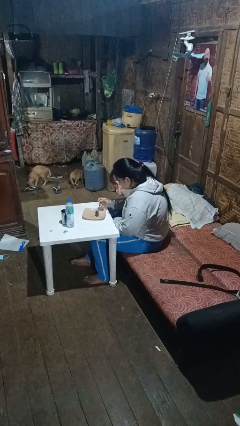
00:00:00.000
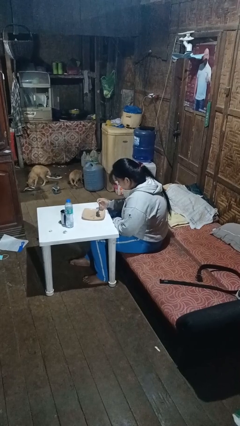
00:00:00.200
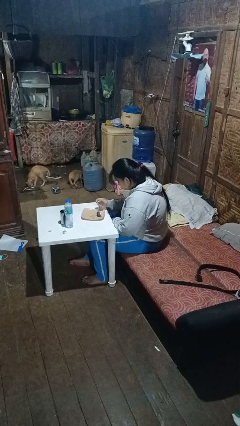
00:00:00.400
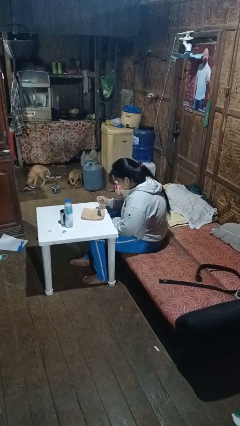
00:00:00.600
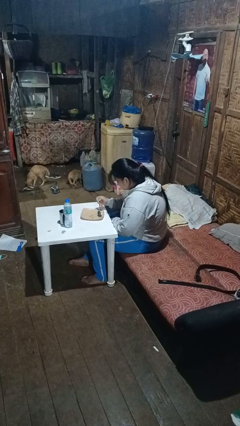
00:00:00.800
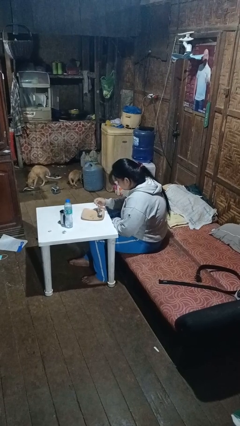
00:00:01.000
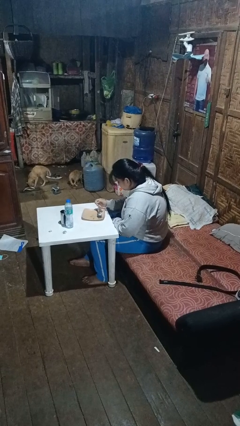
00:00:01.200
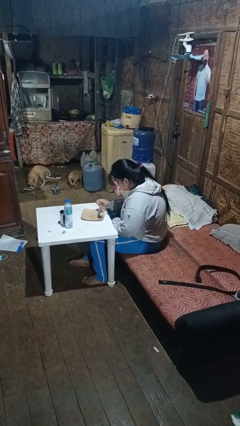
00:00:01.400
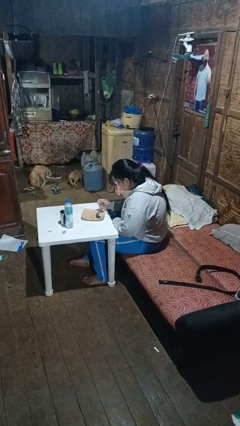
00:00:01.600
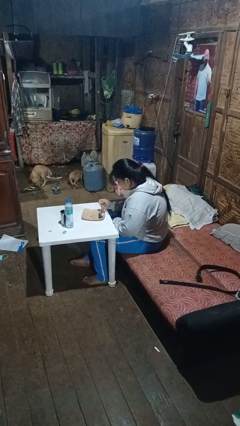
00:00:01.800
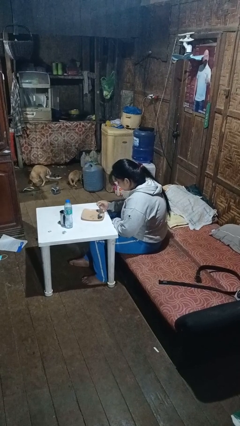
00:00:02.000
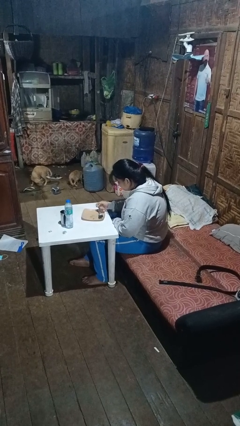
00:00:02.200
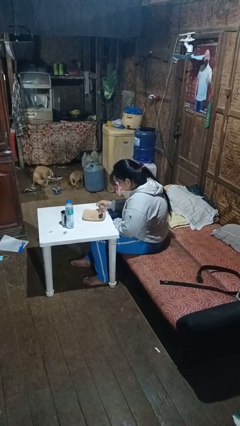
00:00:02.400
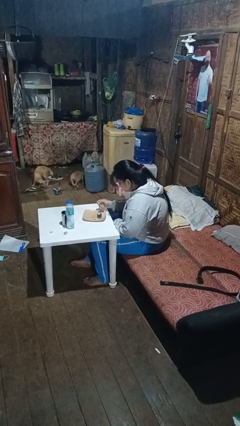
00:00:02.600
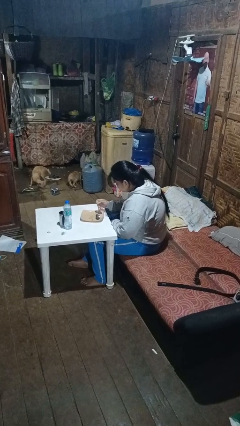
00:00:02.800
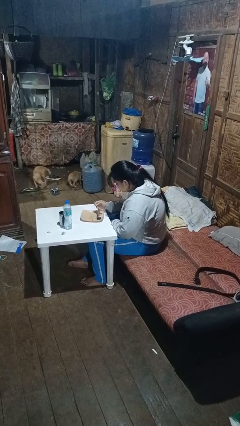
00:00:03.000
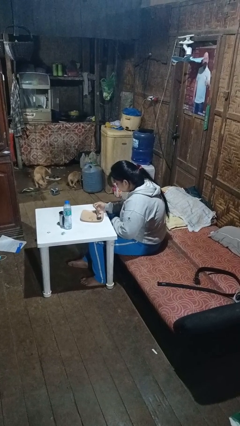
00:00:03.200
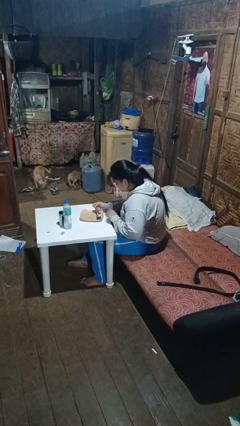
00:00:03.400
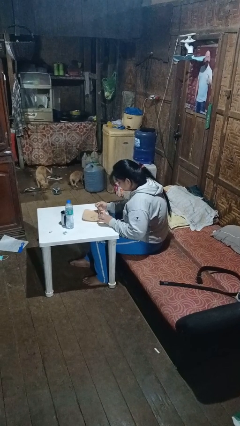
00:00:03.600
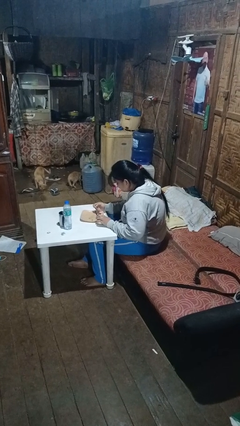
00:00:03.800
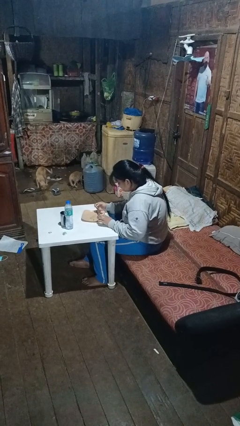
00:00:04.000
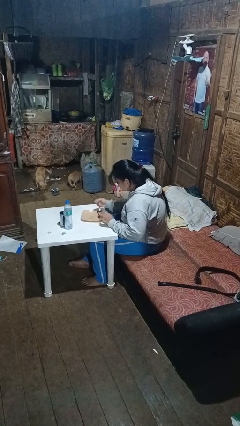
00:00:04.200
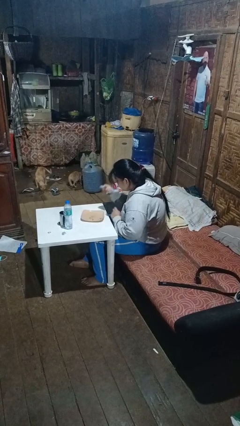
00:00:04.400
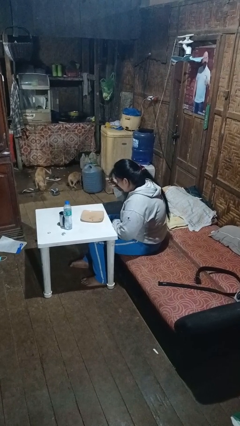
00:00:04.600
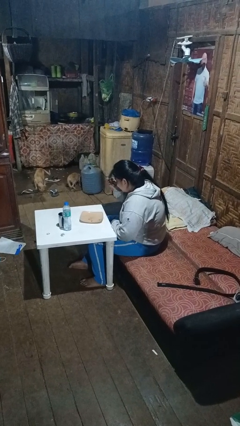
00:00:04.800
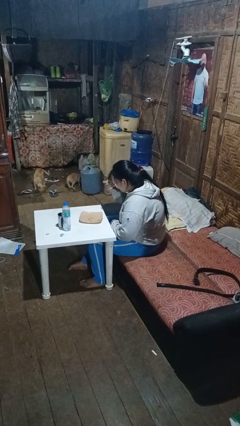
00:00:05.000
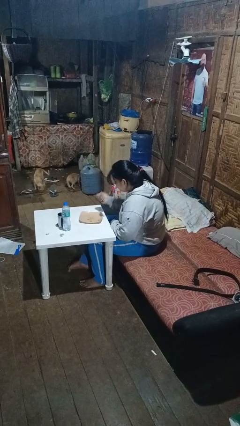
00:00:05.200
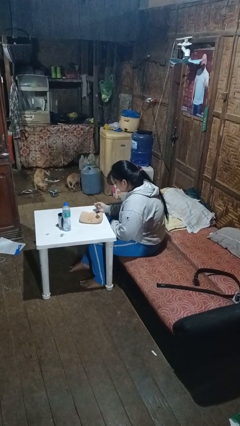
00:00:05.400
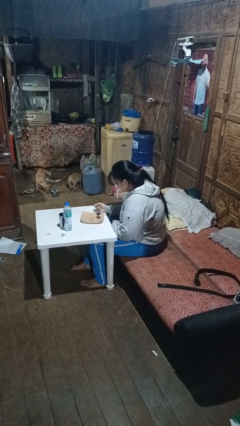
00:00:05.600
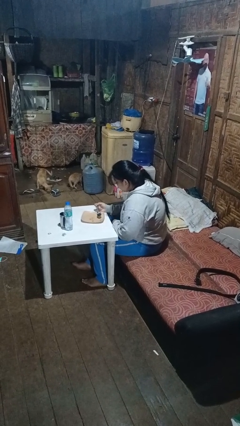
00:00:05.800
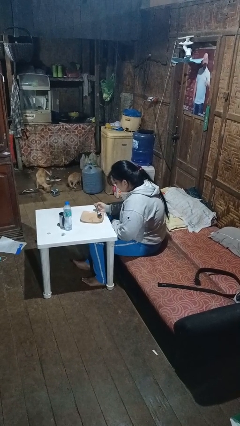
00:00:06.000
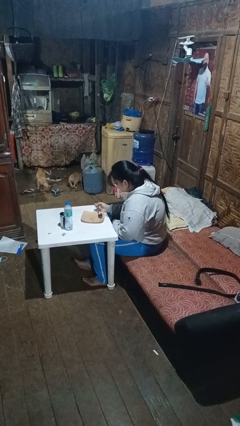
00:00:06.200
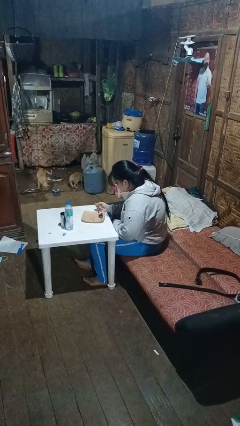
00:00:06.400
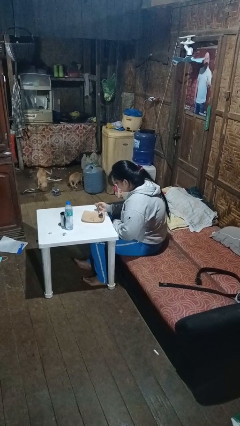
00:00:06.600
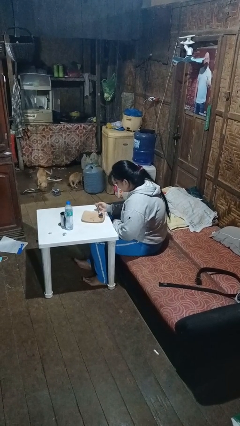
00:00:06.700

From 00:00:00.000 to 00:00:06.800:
person eats with utensil

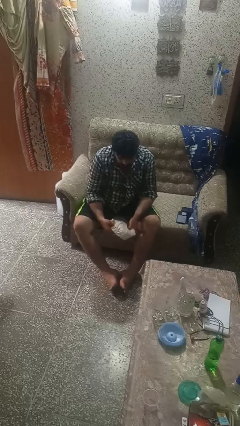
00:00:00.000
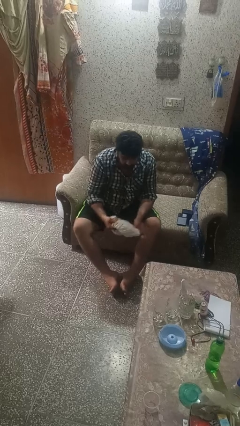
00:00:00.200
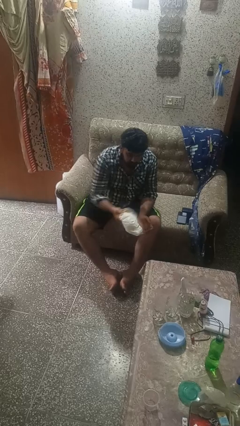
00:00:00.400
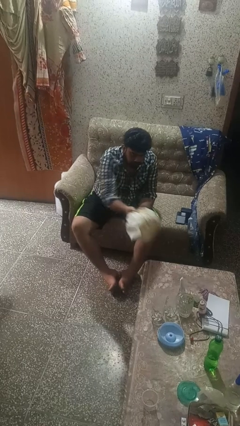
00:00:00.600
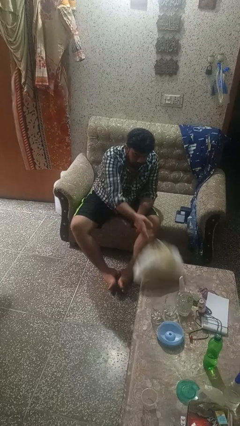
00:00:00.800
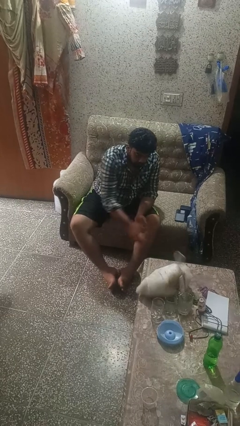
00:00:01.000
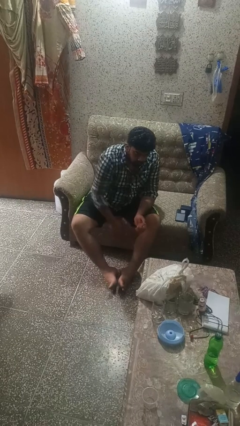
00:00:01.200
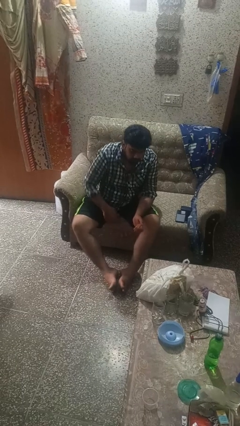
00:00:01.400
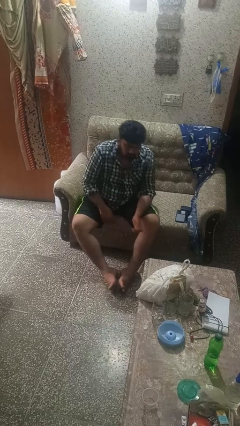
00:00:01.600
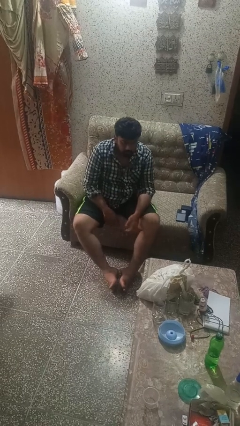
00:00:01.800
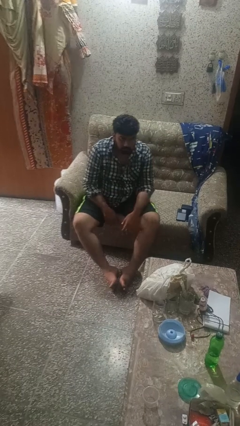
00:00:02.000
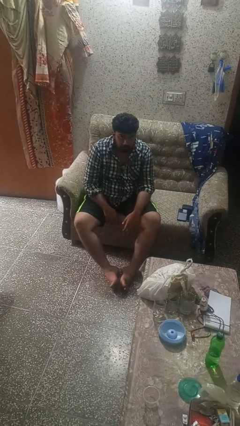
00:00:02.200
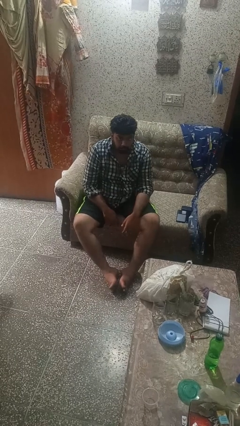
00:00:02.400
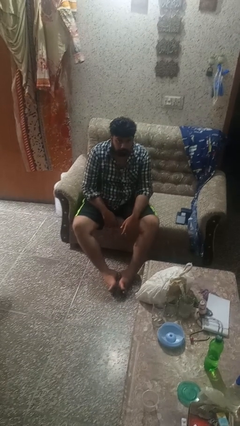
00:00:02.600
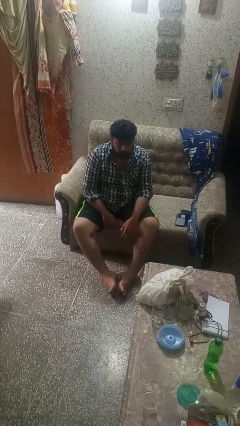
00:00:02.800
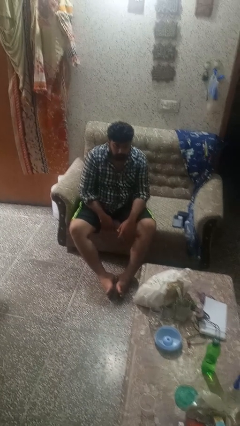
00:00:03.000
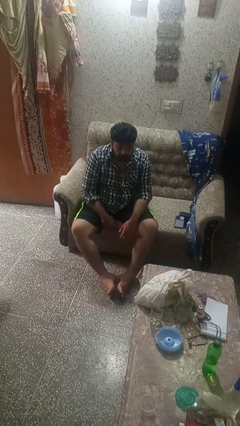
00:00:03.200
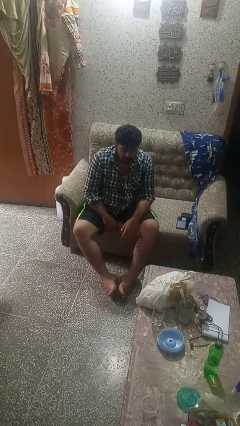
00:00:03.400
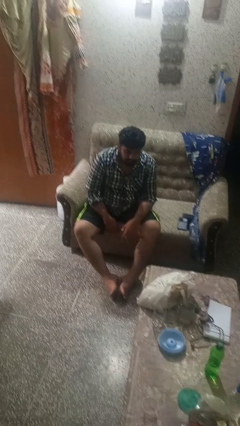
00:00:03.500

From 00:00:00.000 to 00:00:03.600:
person throws object on table

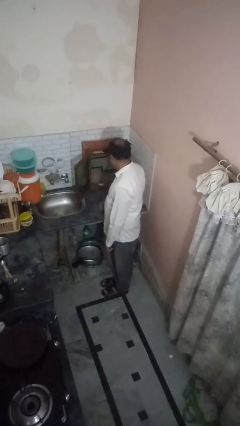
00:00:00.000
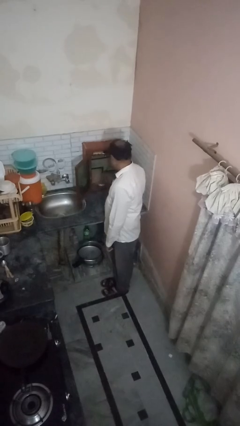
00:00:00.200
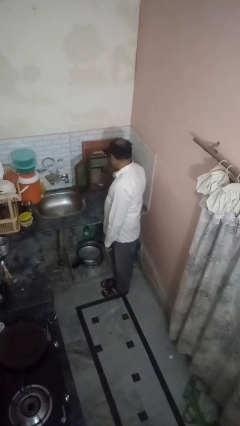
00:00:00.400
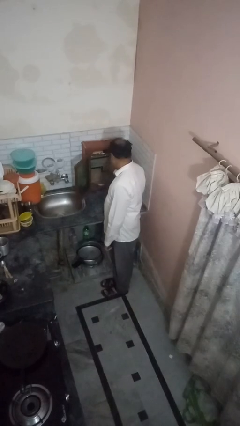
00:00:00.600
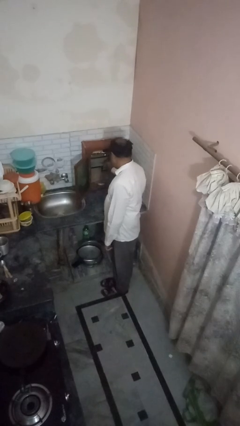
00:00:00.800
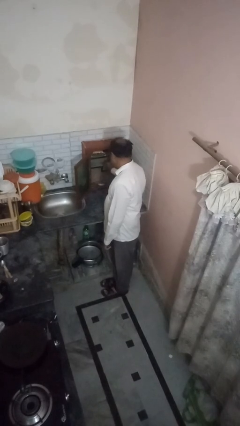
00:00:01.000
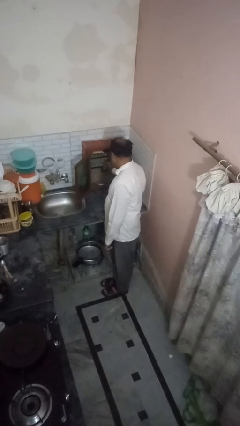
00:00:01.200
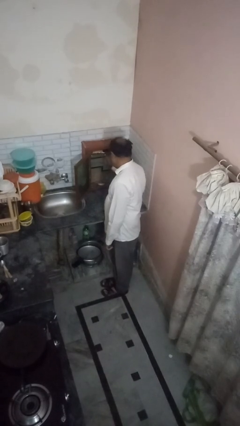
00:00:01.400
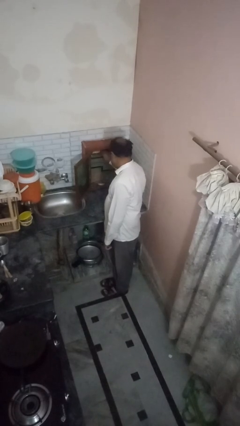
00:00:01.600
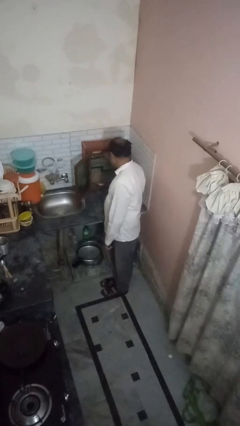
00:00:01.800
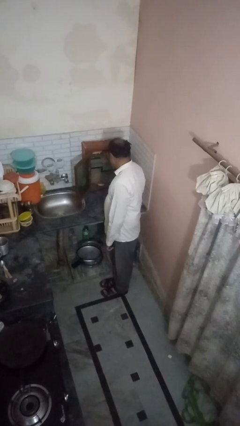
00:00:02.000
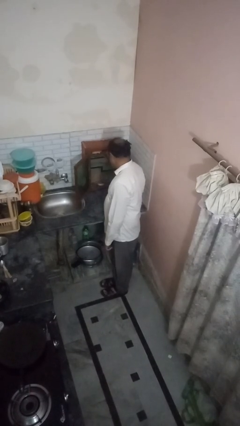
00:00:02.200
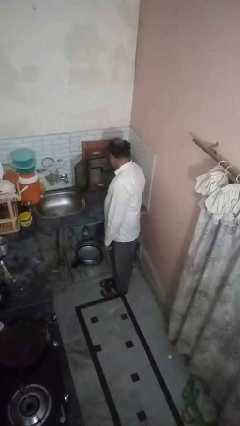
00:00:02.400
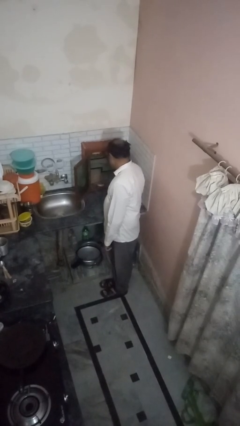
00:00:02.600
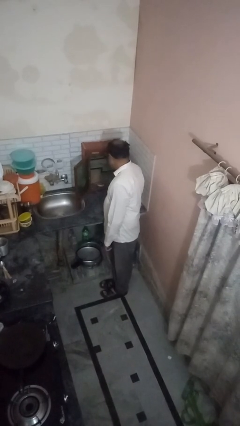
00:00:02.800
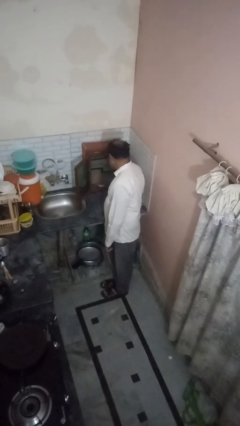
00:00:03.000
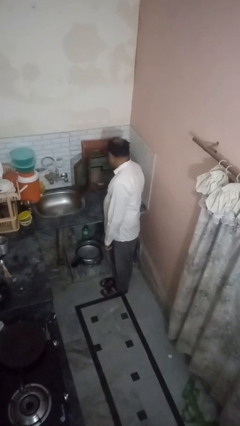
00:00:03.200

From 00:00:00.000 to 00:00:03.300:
person searches in kitchen drawer

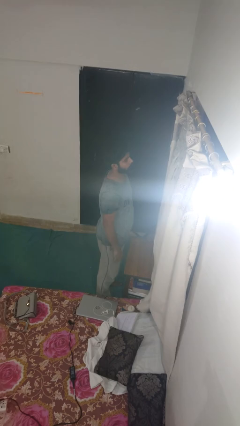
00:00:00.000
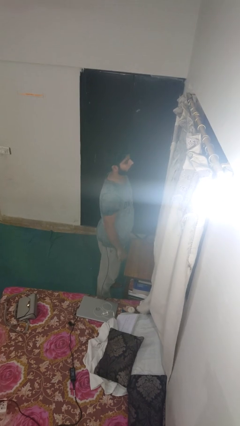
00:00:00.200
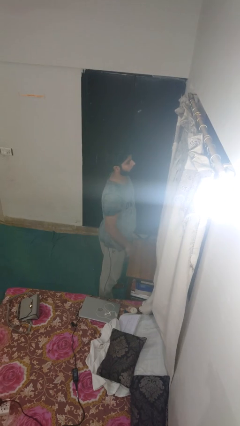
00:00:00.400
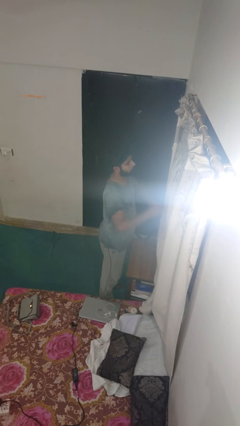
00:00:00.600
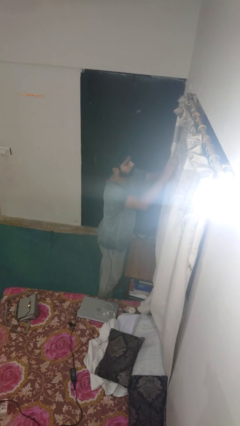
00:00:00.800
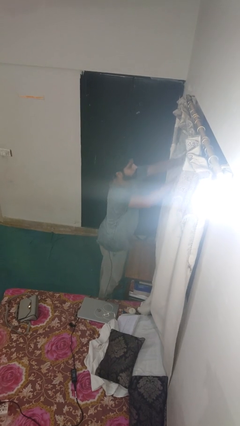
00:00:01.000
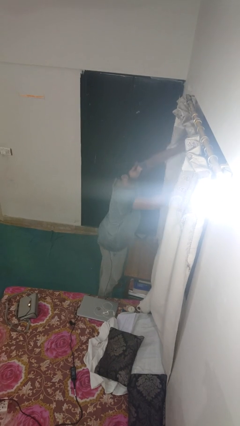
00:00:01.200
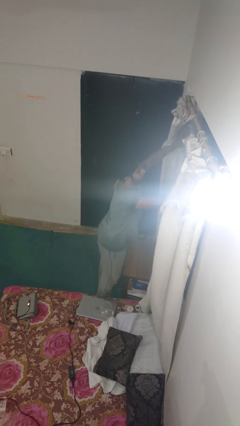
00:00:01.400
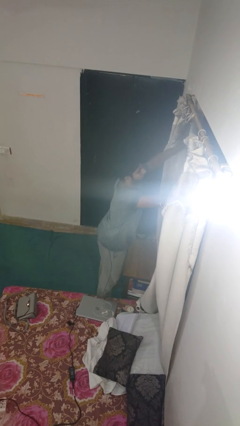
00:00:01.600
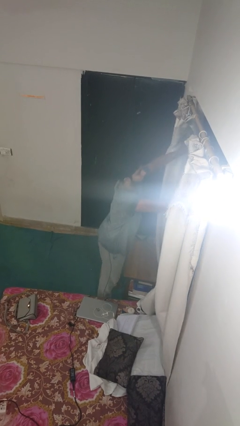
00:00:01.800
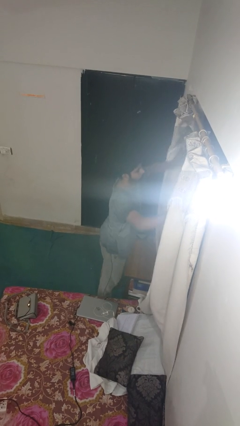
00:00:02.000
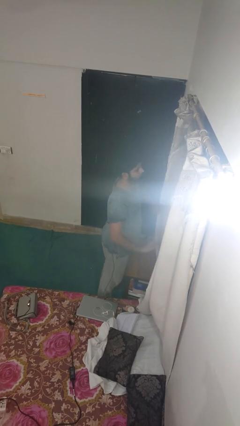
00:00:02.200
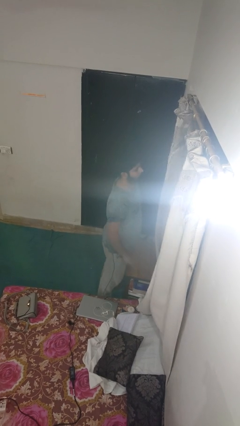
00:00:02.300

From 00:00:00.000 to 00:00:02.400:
person opens curtains

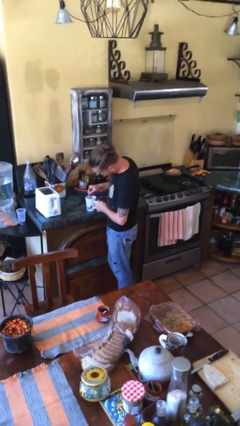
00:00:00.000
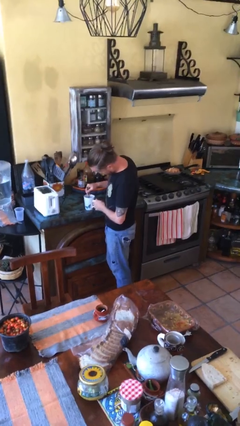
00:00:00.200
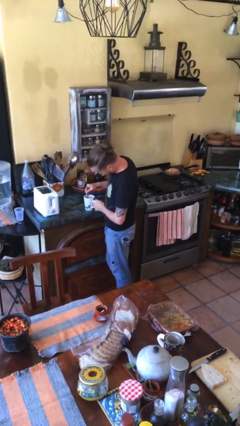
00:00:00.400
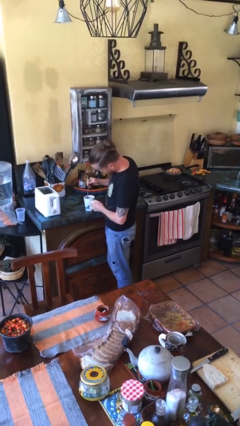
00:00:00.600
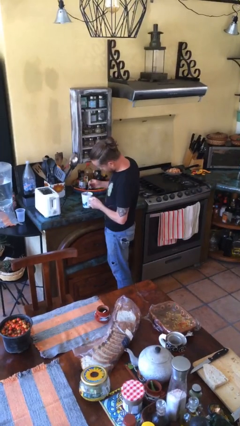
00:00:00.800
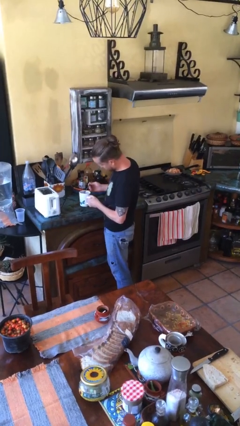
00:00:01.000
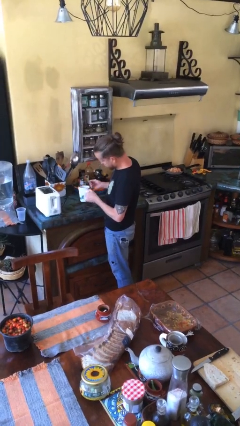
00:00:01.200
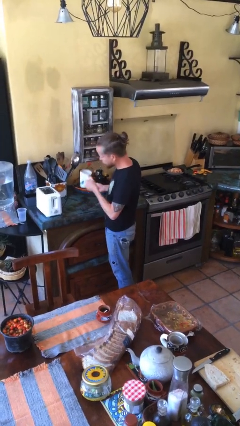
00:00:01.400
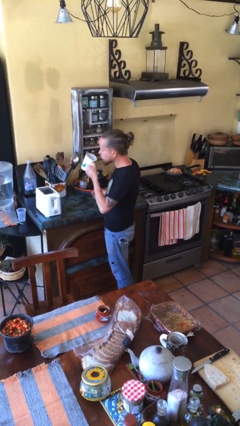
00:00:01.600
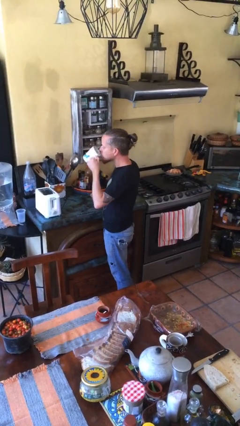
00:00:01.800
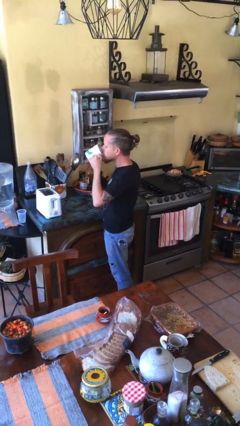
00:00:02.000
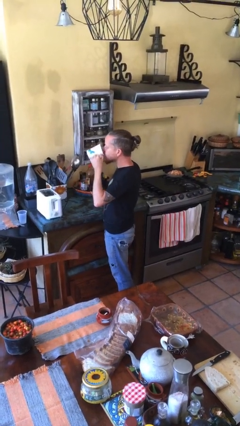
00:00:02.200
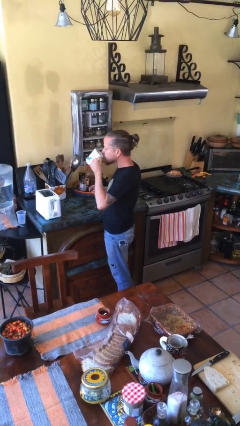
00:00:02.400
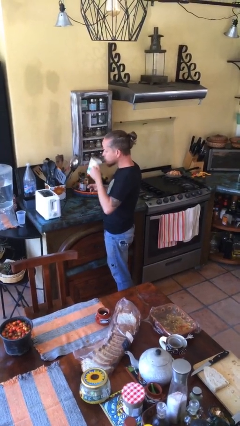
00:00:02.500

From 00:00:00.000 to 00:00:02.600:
person drinks from mug
